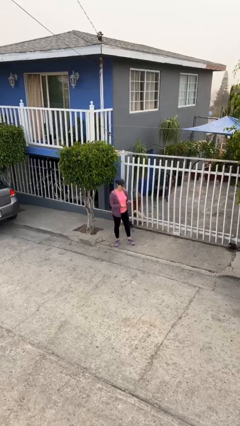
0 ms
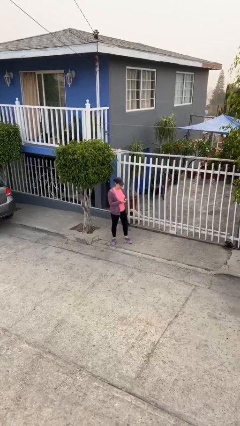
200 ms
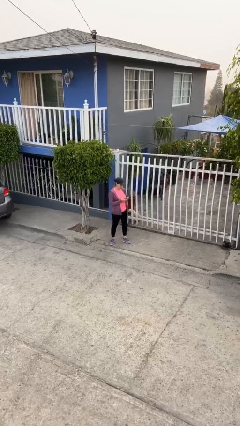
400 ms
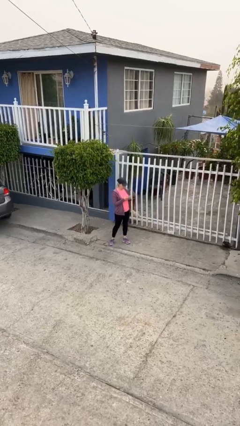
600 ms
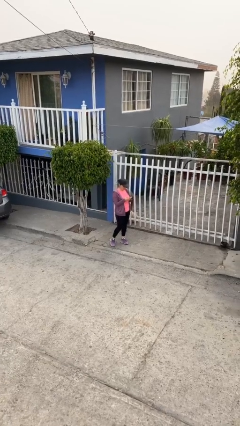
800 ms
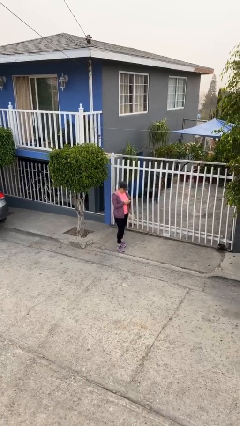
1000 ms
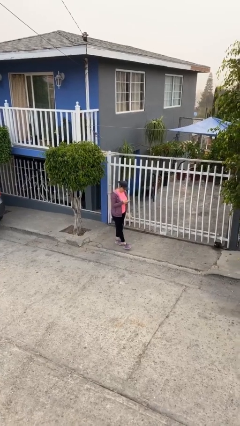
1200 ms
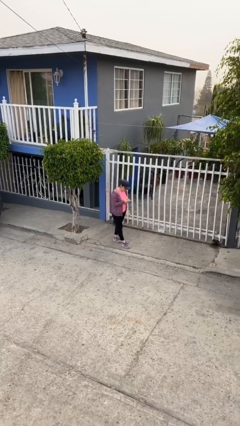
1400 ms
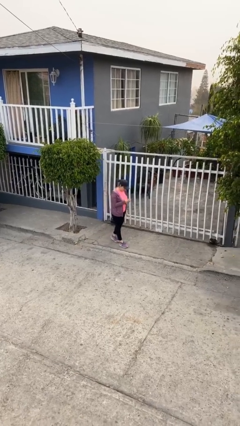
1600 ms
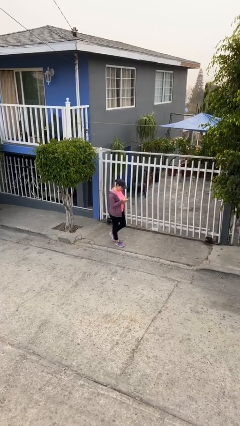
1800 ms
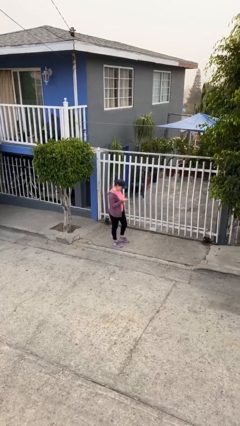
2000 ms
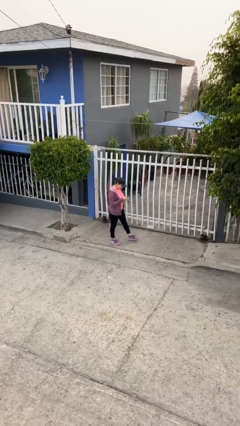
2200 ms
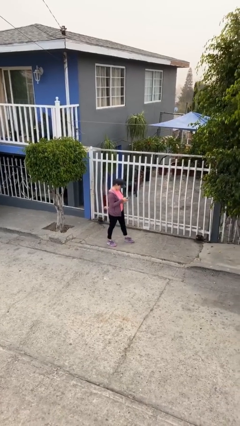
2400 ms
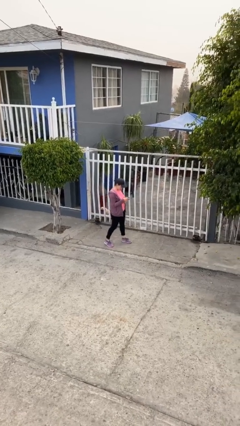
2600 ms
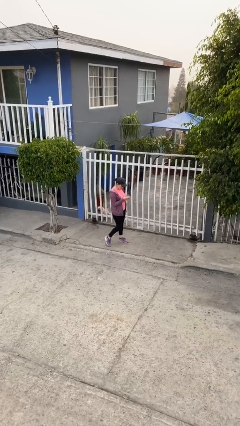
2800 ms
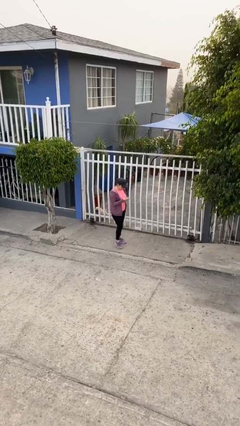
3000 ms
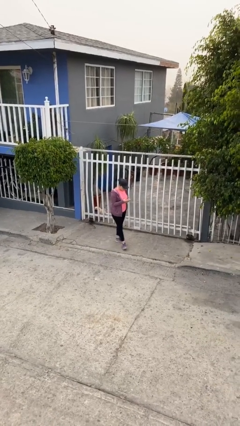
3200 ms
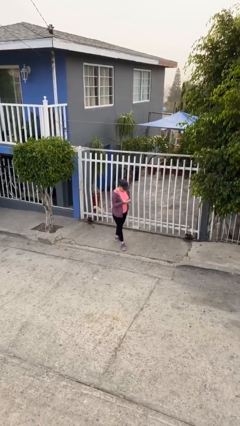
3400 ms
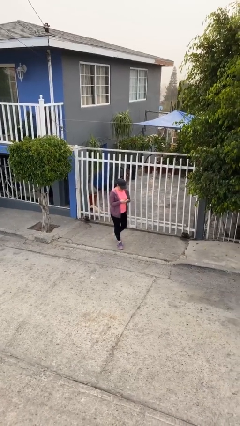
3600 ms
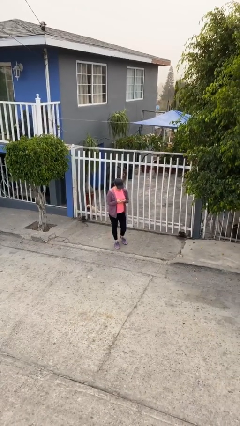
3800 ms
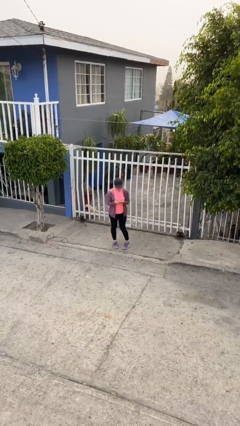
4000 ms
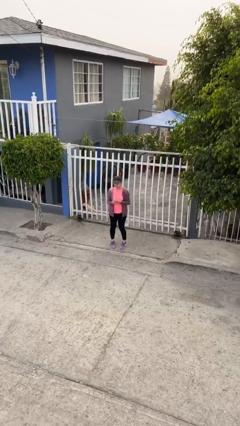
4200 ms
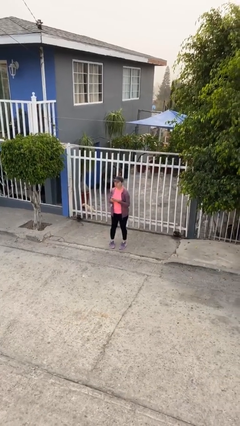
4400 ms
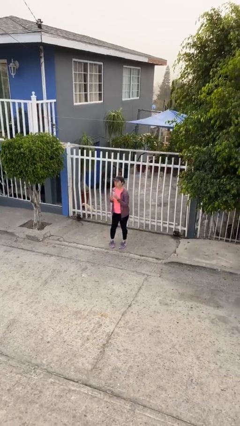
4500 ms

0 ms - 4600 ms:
person texts on phone

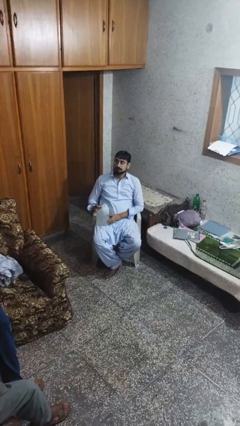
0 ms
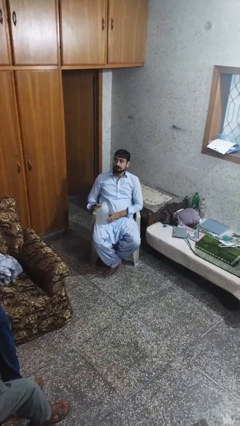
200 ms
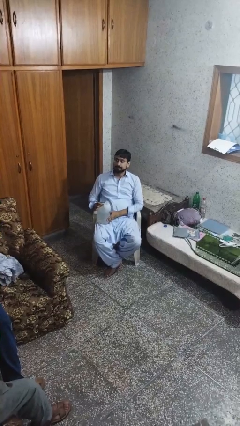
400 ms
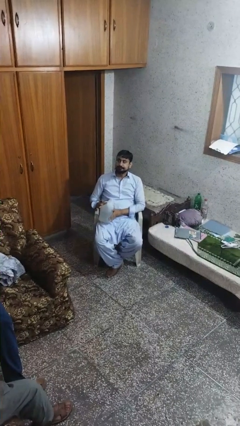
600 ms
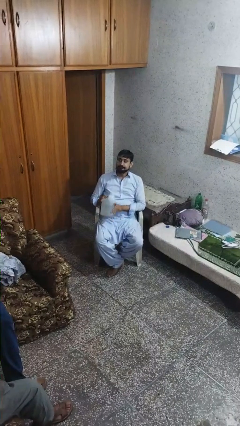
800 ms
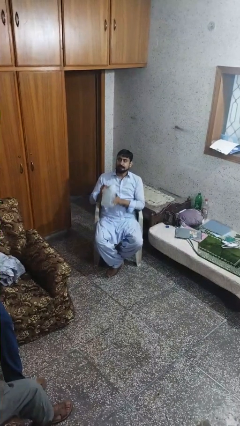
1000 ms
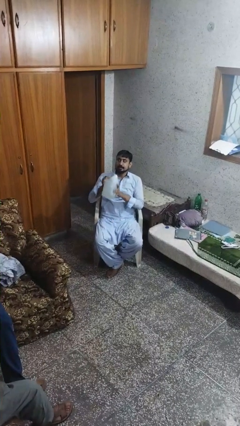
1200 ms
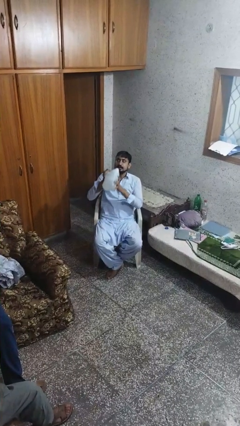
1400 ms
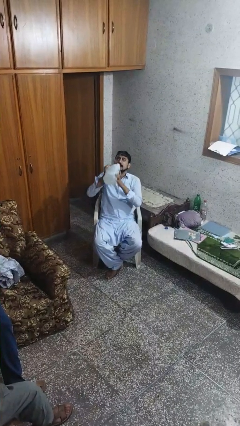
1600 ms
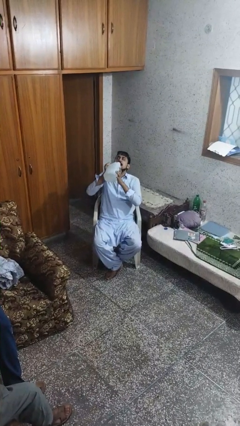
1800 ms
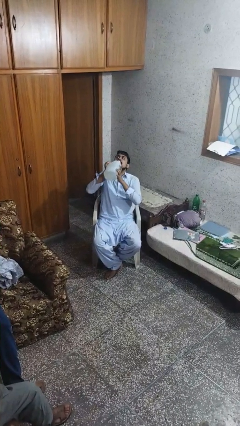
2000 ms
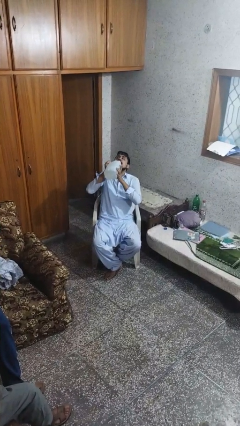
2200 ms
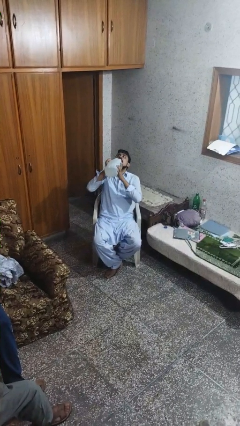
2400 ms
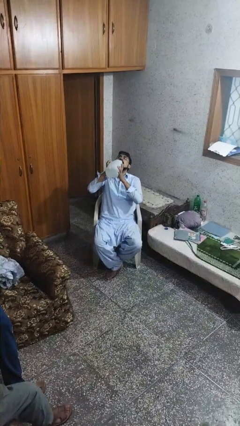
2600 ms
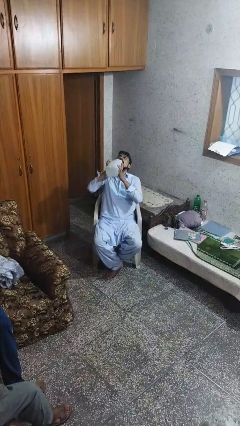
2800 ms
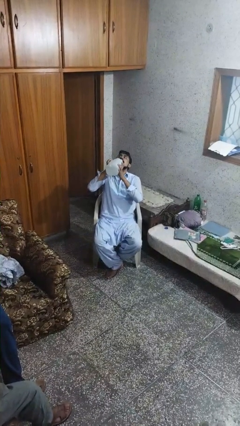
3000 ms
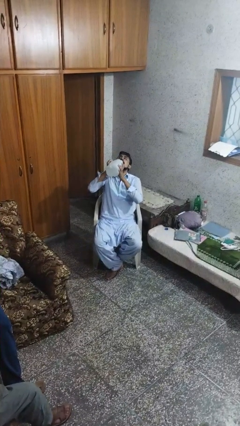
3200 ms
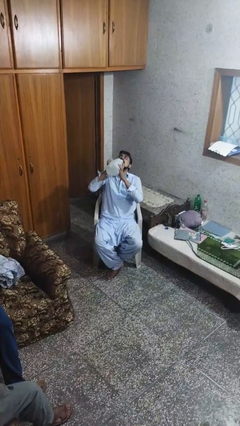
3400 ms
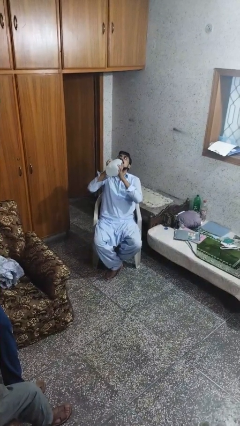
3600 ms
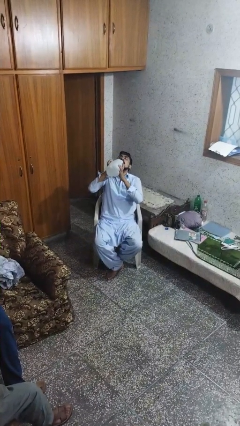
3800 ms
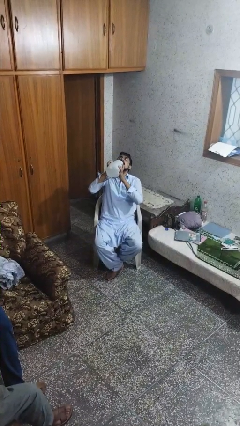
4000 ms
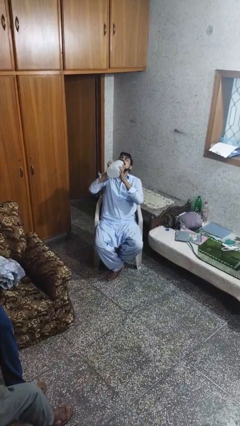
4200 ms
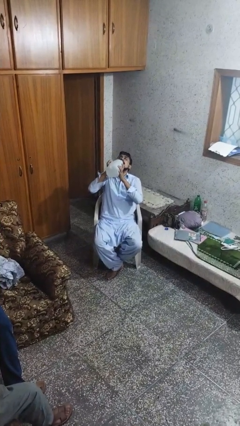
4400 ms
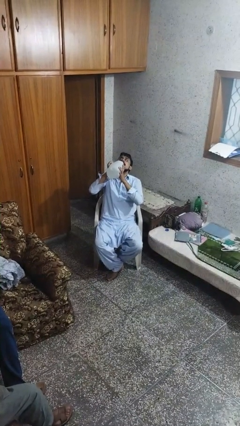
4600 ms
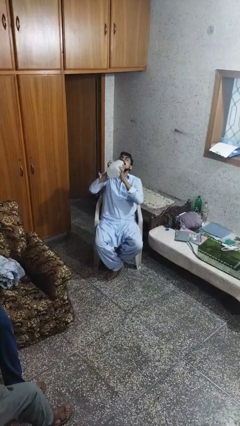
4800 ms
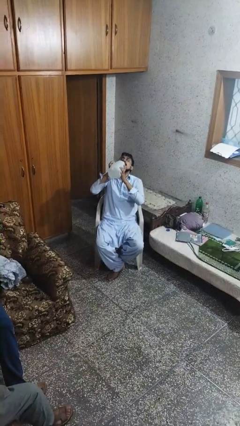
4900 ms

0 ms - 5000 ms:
person drinks from bottle

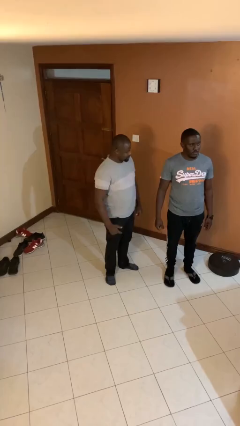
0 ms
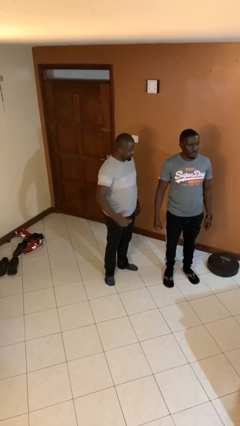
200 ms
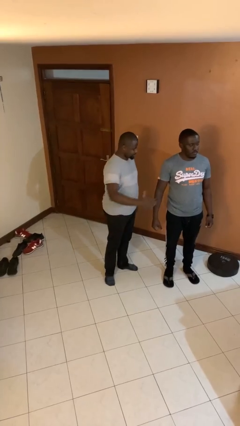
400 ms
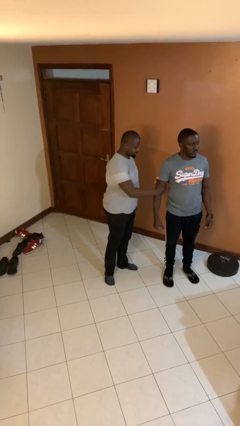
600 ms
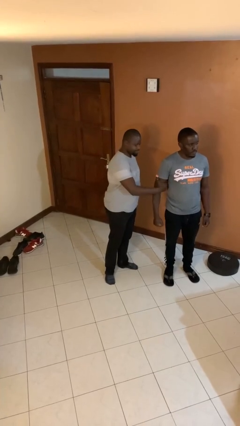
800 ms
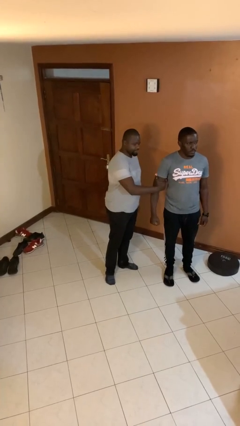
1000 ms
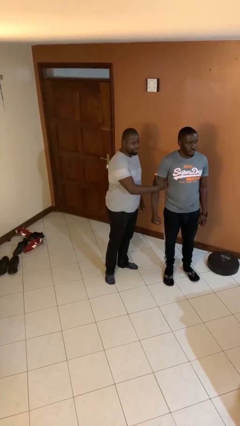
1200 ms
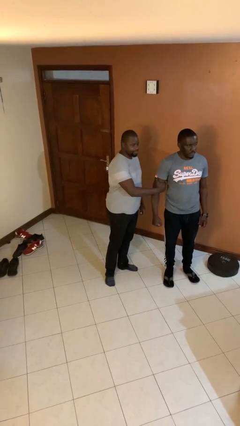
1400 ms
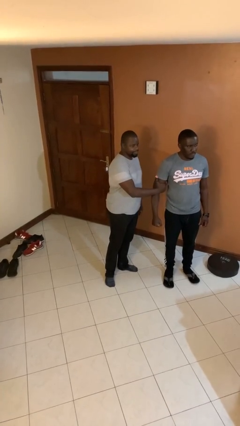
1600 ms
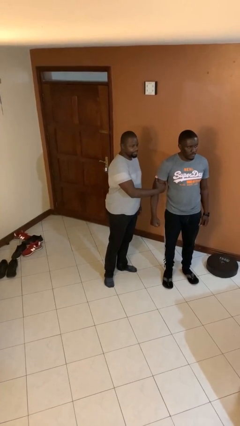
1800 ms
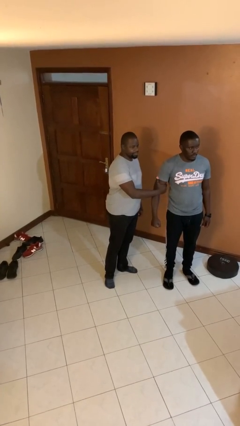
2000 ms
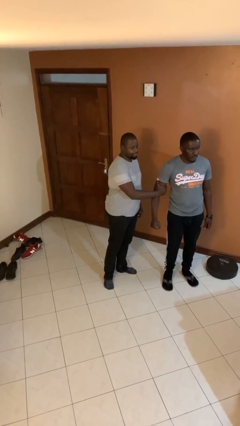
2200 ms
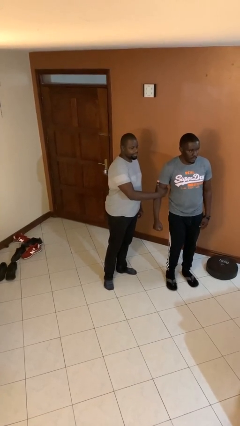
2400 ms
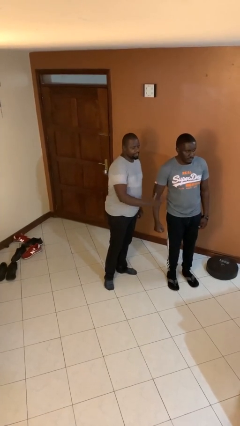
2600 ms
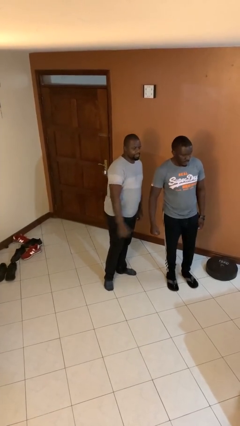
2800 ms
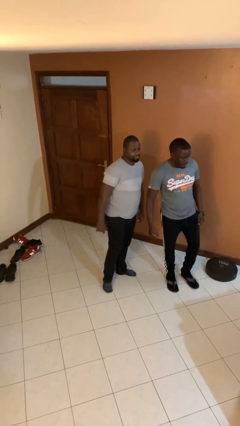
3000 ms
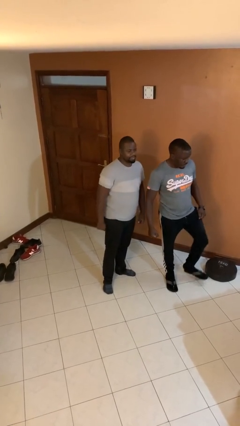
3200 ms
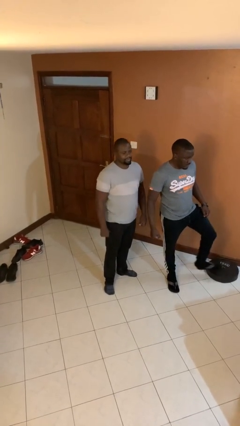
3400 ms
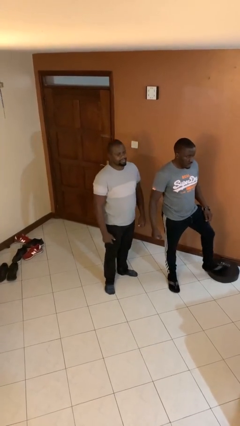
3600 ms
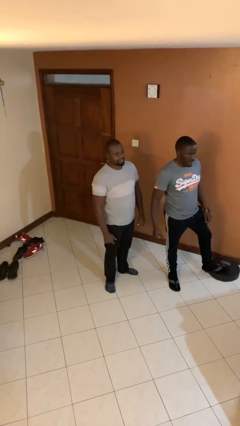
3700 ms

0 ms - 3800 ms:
person grabs person by bicep

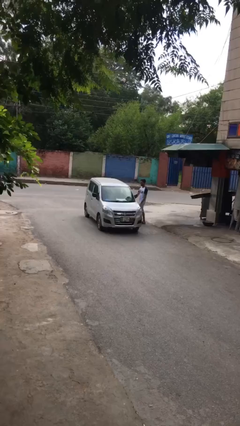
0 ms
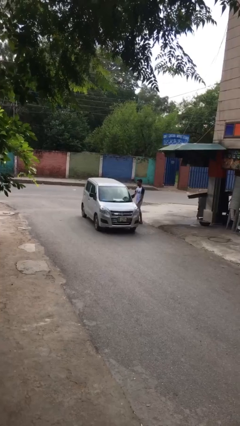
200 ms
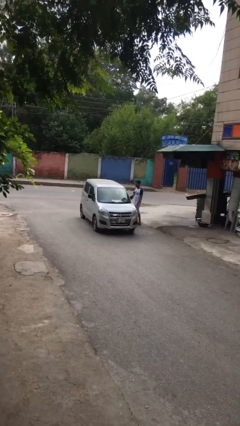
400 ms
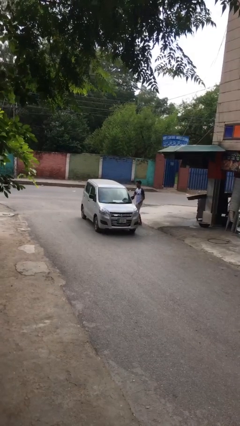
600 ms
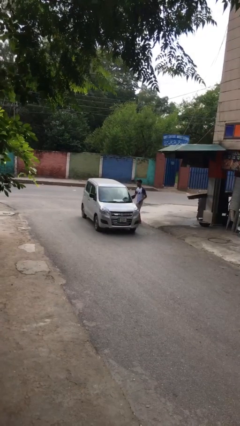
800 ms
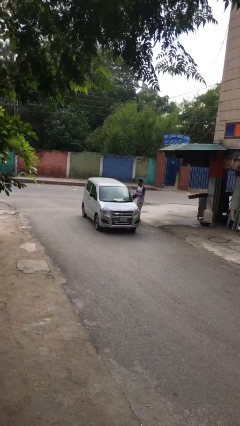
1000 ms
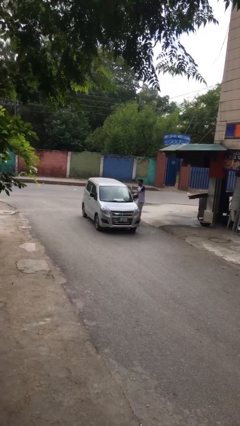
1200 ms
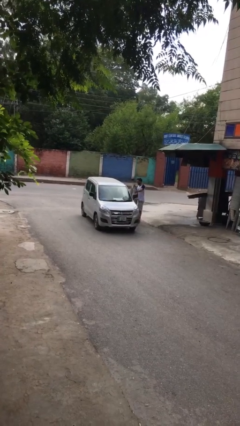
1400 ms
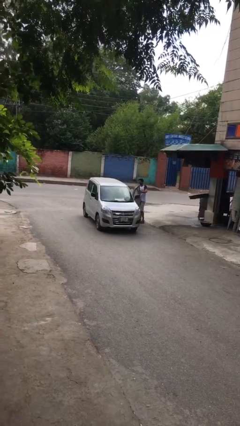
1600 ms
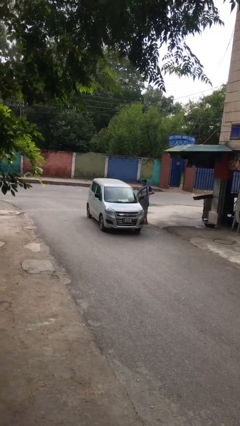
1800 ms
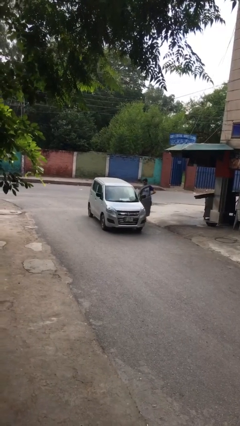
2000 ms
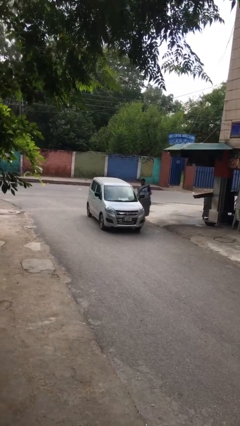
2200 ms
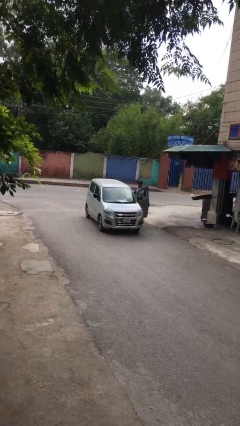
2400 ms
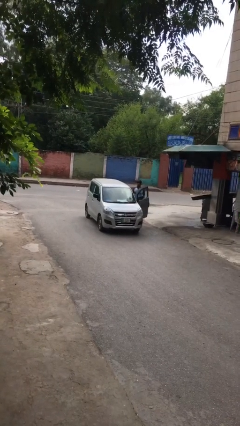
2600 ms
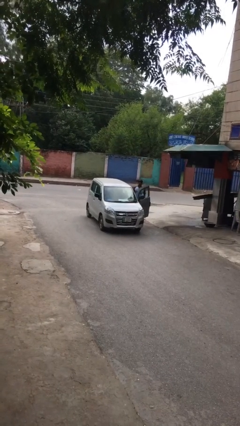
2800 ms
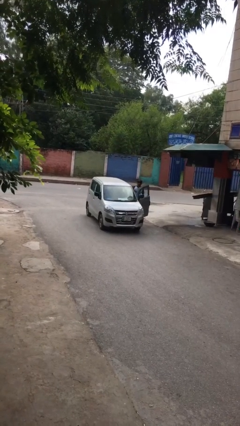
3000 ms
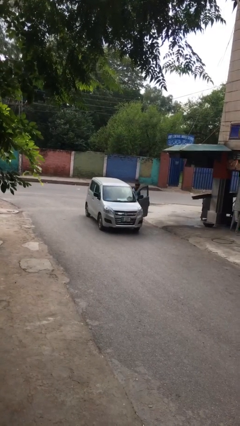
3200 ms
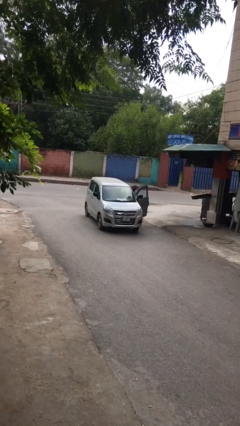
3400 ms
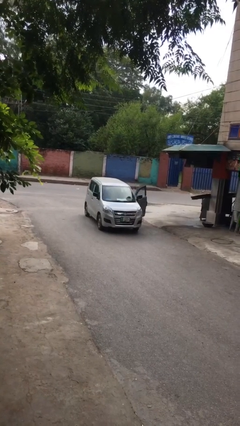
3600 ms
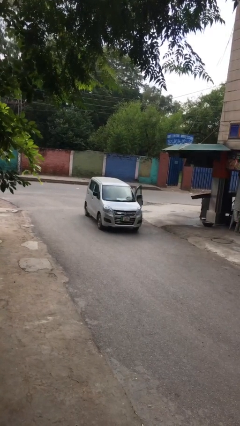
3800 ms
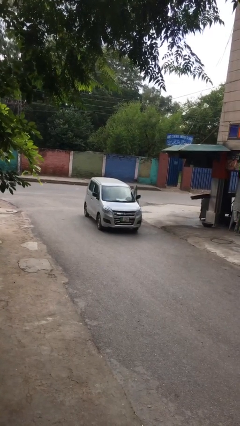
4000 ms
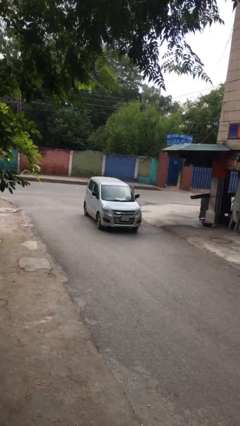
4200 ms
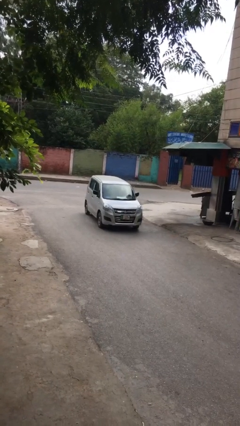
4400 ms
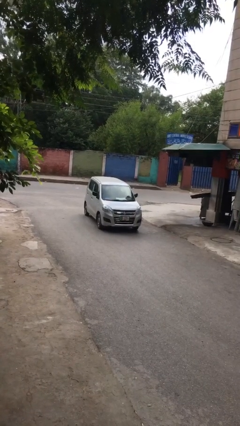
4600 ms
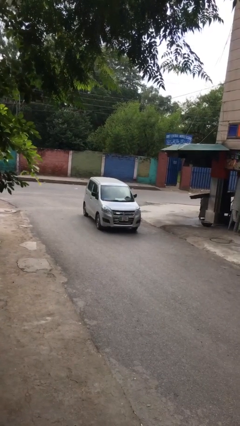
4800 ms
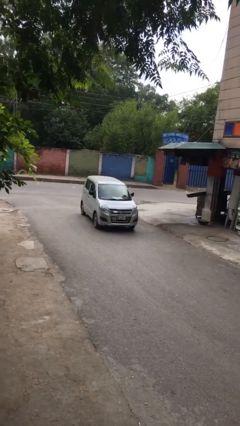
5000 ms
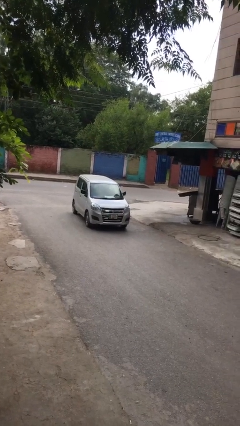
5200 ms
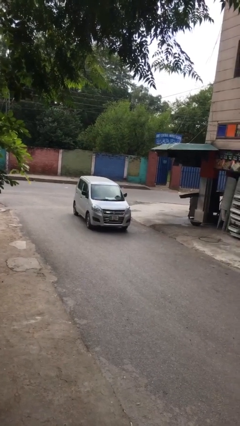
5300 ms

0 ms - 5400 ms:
car picks up person
